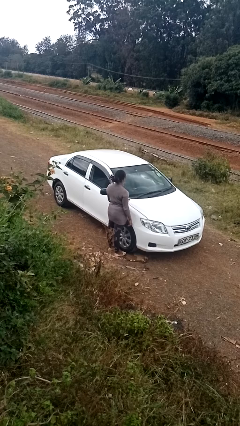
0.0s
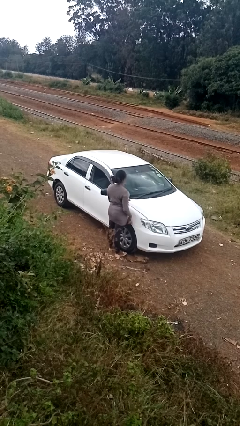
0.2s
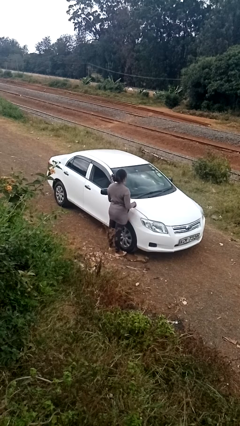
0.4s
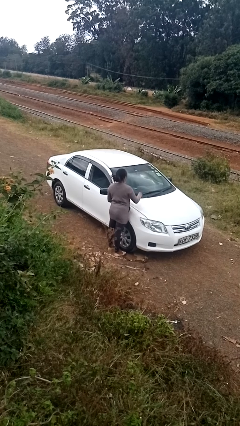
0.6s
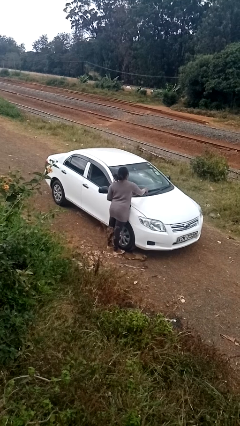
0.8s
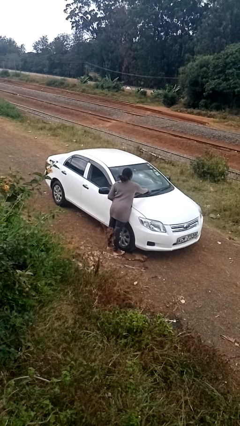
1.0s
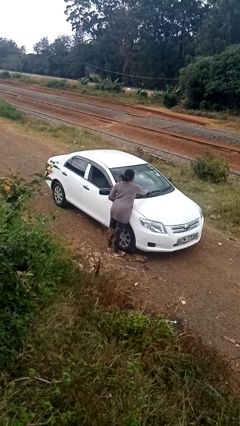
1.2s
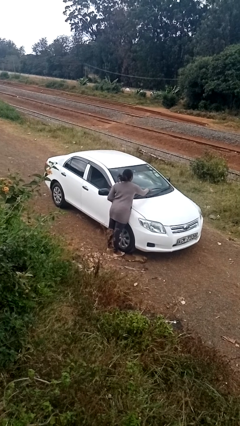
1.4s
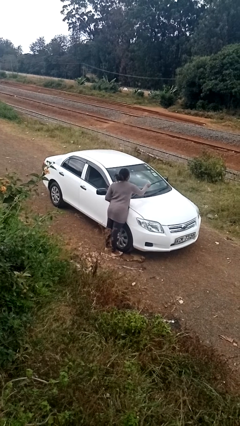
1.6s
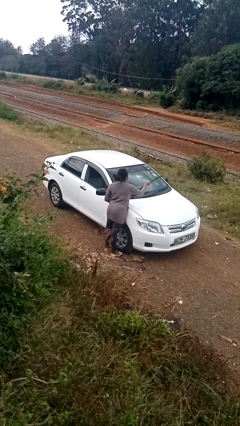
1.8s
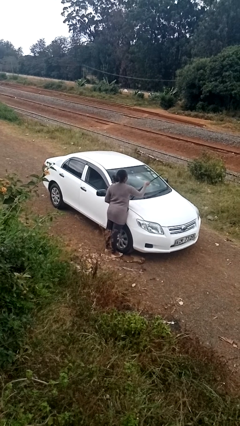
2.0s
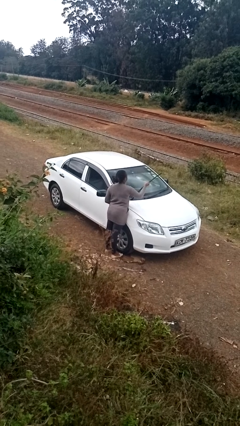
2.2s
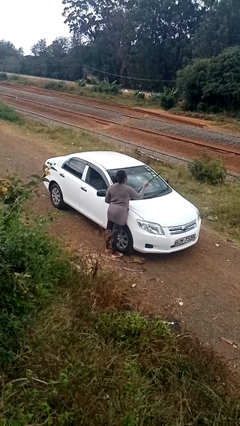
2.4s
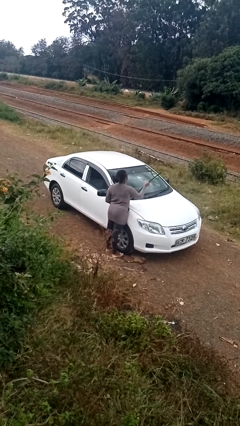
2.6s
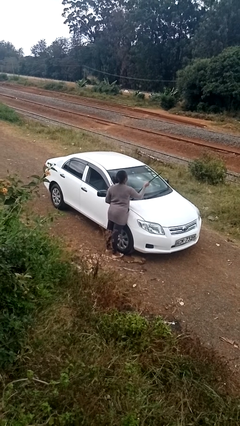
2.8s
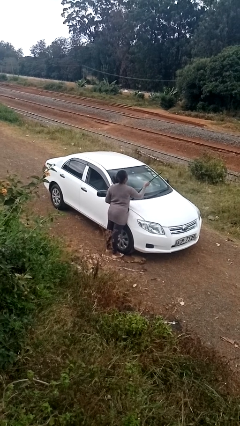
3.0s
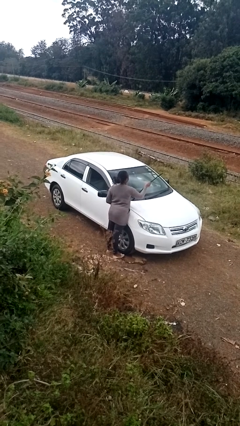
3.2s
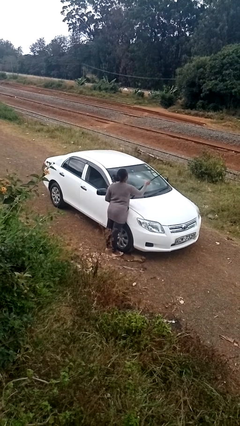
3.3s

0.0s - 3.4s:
person flips up car wipers

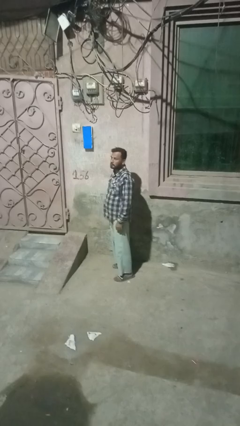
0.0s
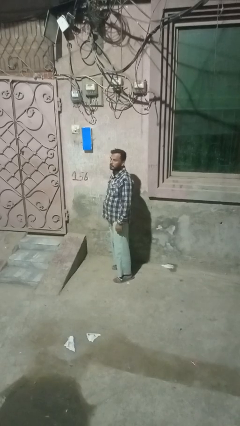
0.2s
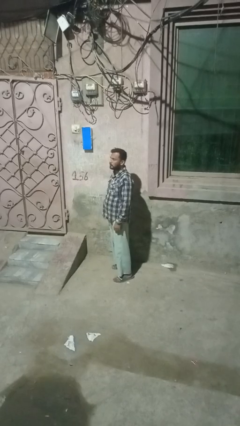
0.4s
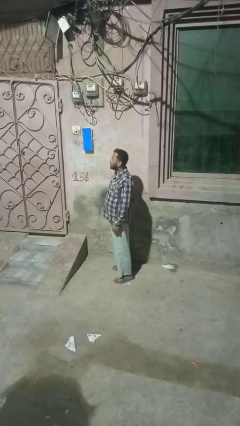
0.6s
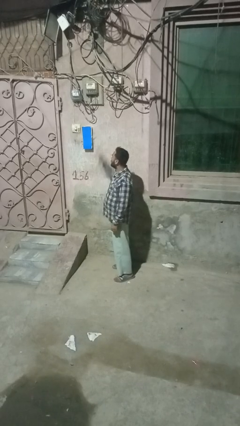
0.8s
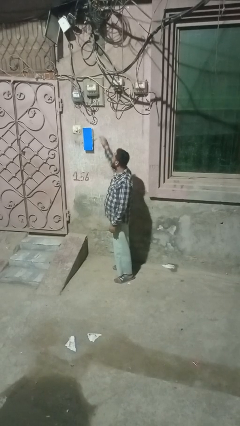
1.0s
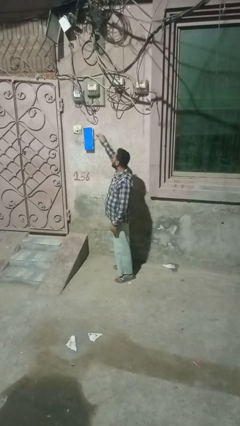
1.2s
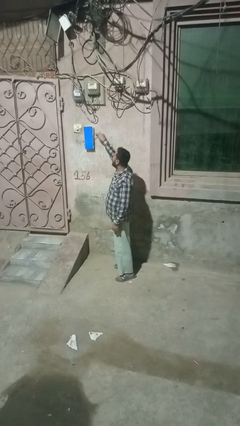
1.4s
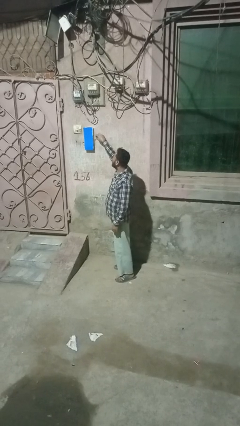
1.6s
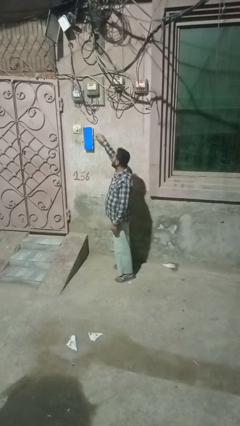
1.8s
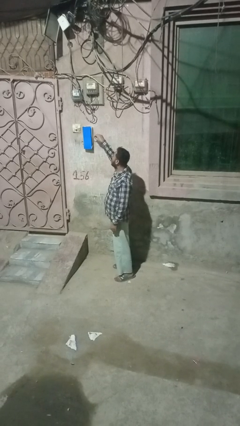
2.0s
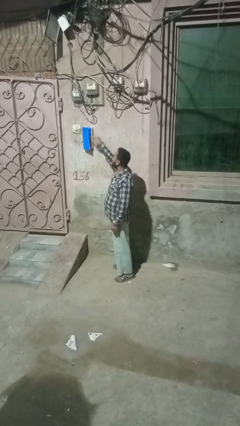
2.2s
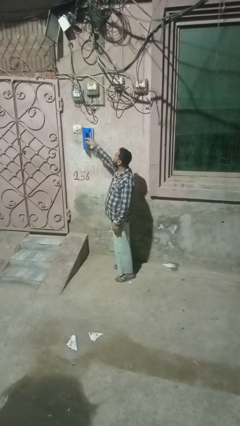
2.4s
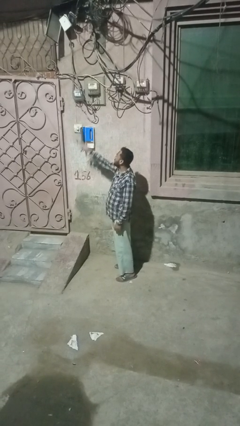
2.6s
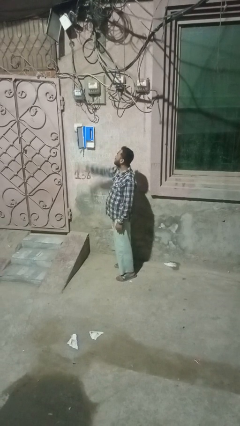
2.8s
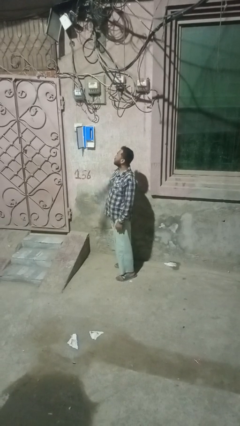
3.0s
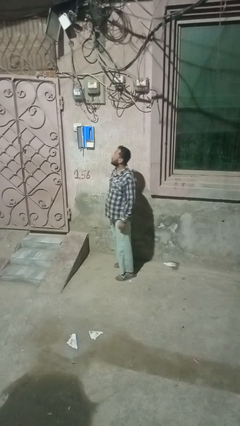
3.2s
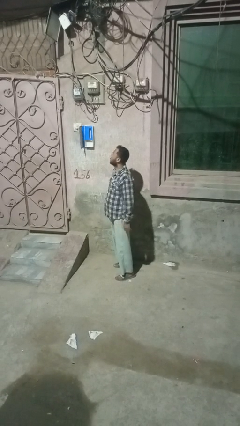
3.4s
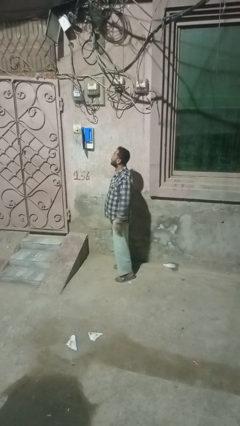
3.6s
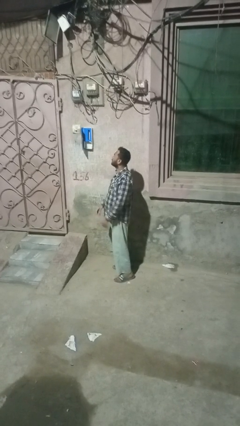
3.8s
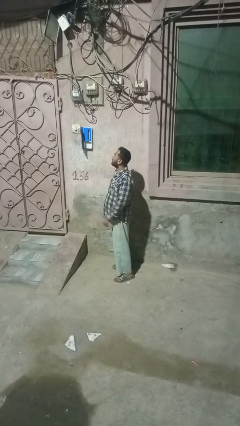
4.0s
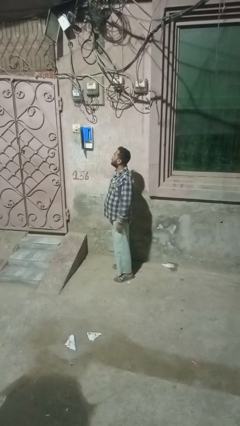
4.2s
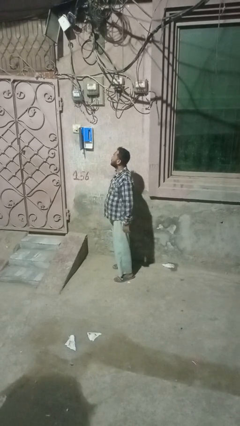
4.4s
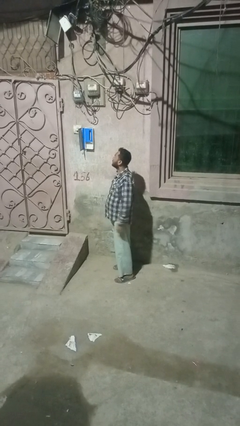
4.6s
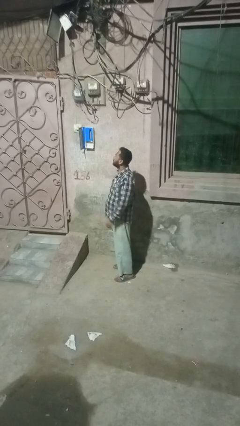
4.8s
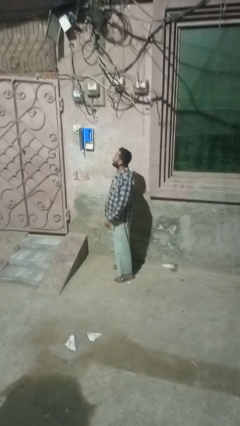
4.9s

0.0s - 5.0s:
person opens mailbox

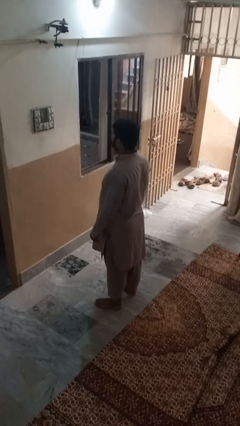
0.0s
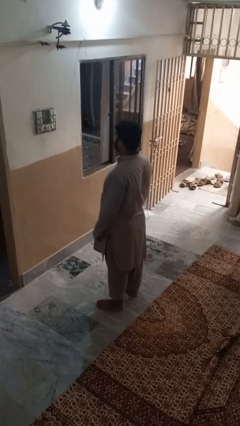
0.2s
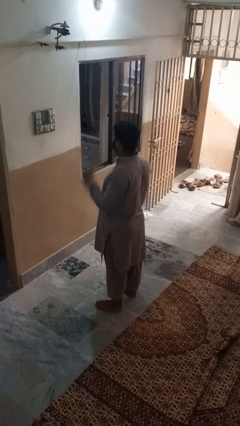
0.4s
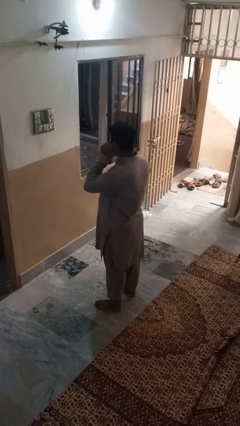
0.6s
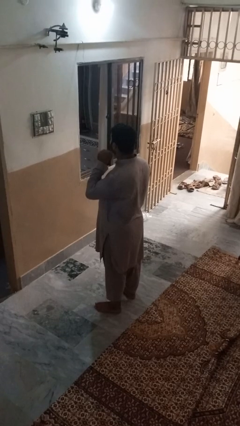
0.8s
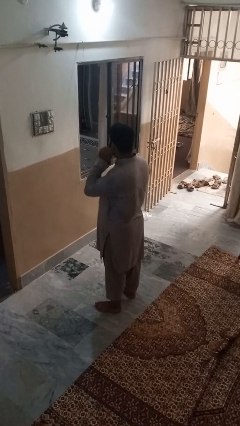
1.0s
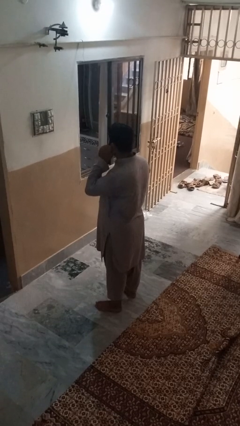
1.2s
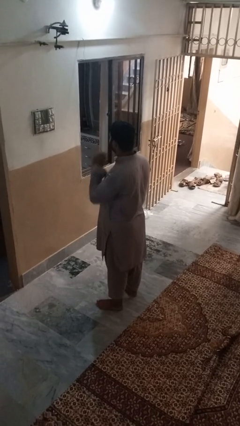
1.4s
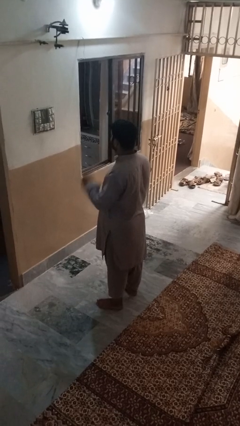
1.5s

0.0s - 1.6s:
person touches earlobe

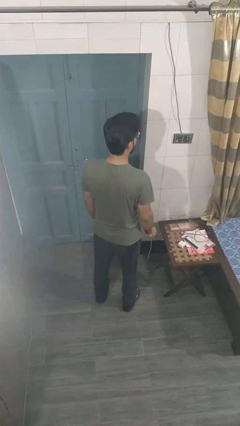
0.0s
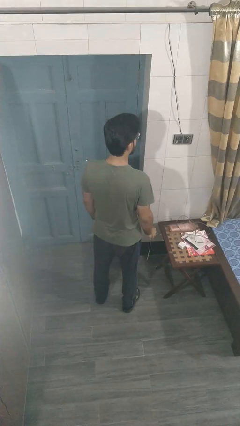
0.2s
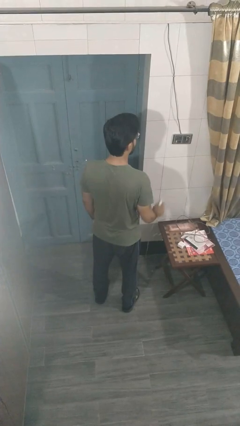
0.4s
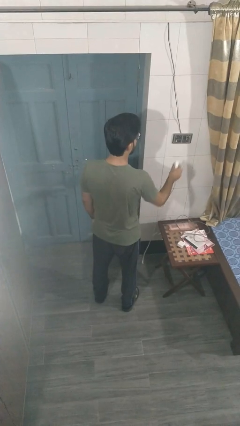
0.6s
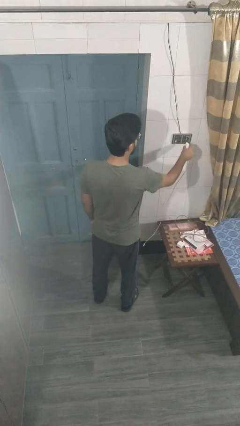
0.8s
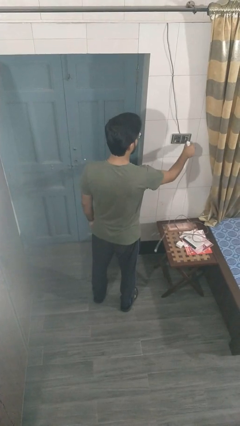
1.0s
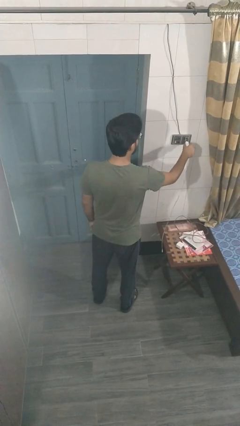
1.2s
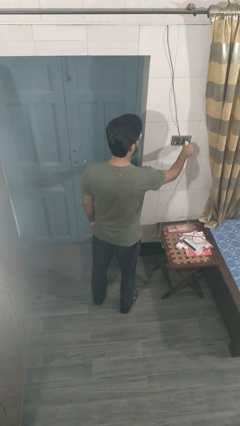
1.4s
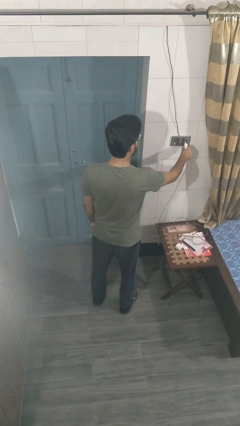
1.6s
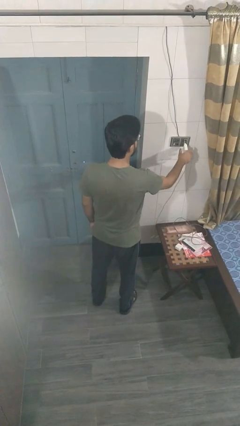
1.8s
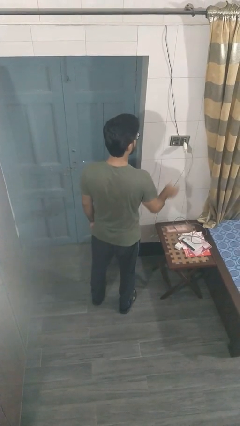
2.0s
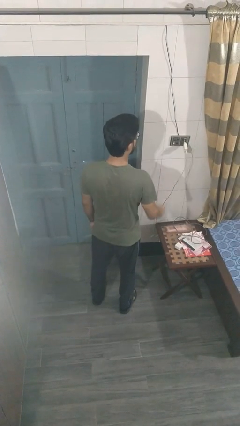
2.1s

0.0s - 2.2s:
person plugs into electrical socket

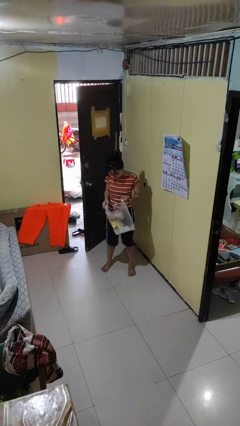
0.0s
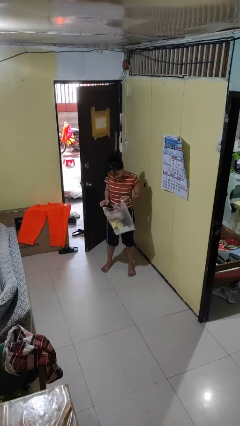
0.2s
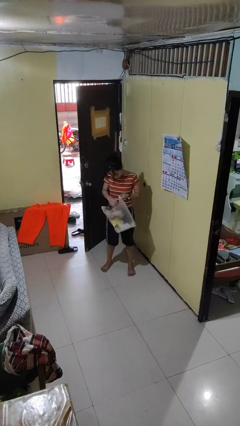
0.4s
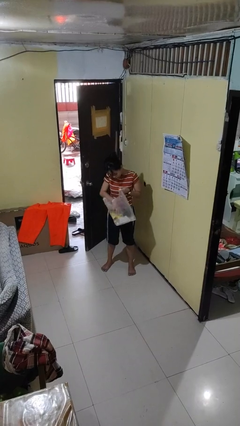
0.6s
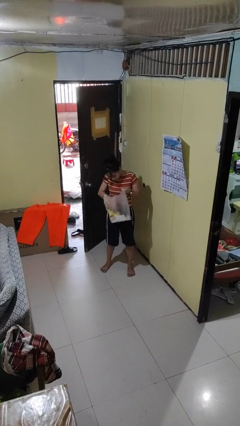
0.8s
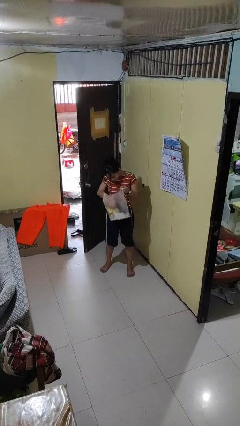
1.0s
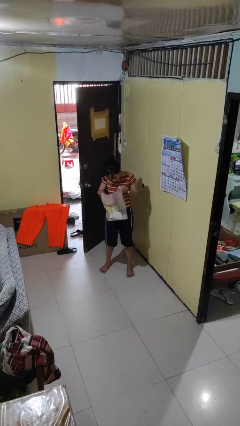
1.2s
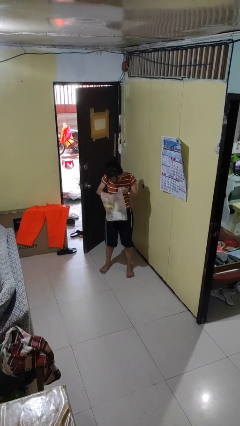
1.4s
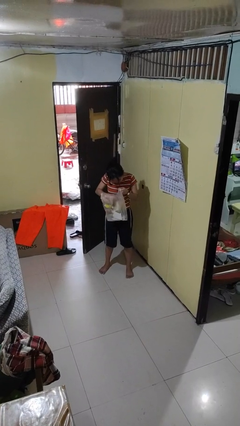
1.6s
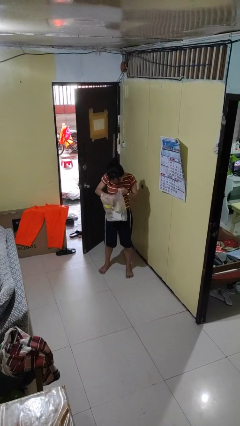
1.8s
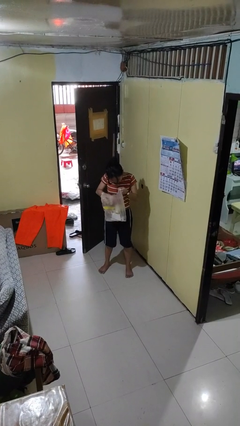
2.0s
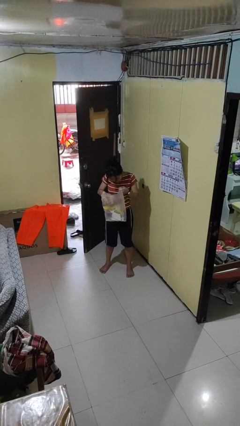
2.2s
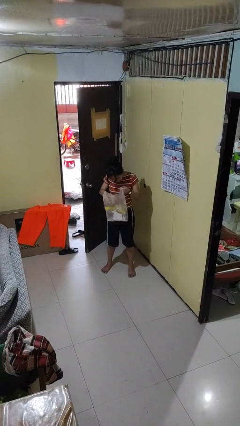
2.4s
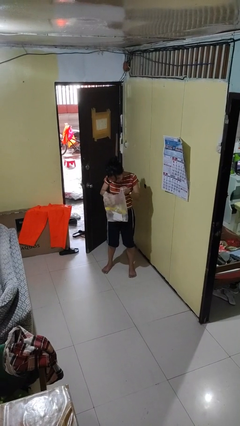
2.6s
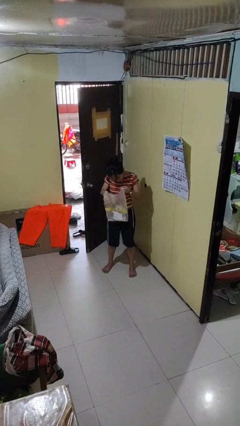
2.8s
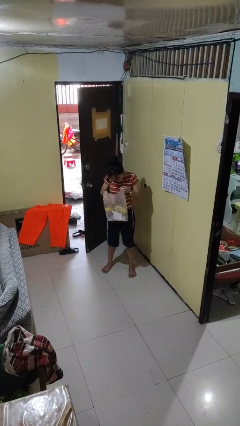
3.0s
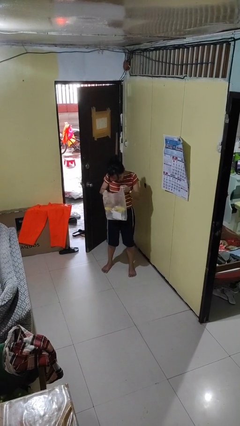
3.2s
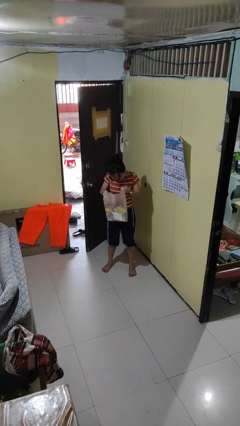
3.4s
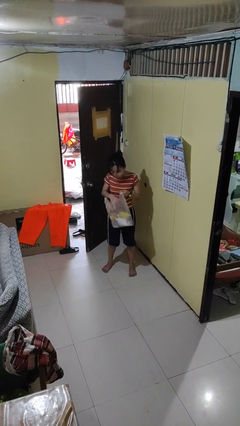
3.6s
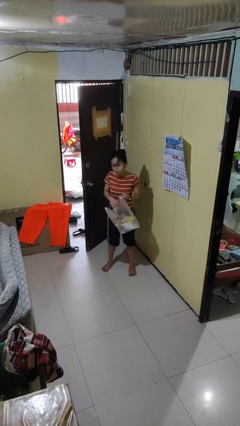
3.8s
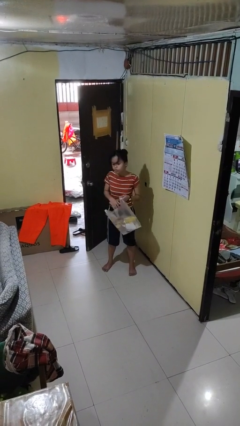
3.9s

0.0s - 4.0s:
person searches in bag

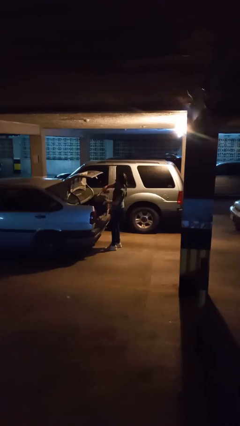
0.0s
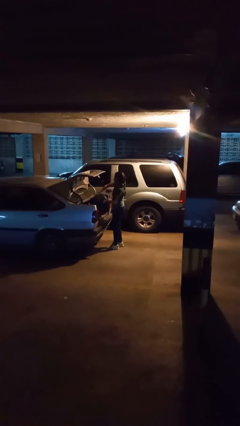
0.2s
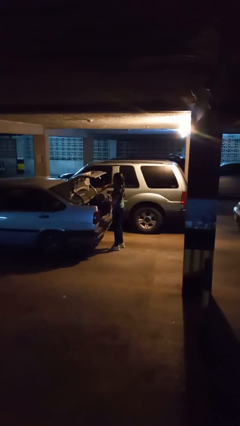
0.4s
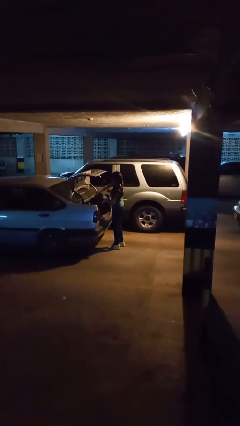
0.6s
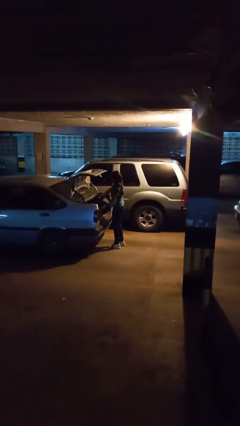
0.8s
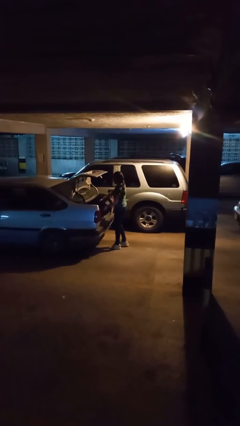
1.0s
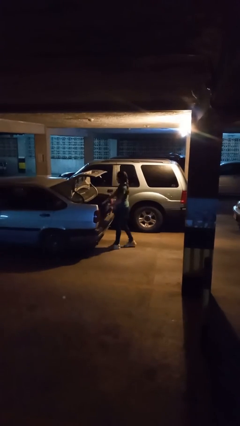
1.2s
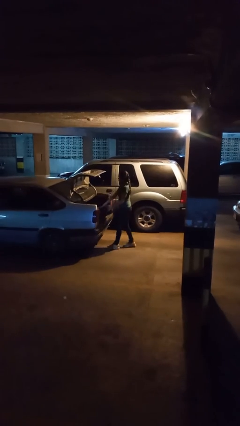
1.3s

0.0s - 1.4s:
person loads car
